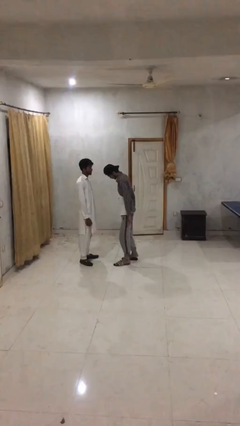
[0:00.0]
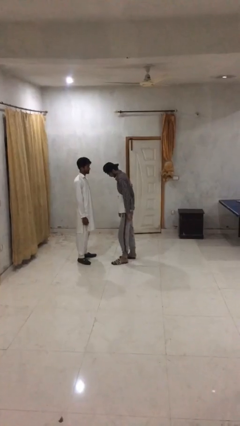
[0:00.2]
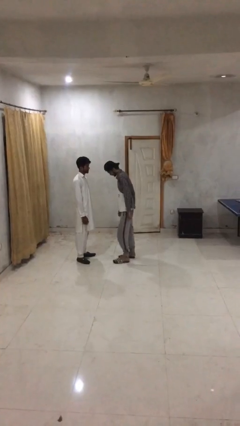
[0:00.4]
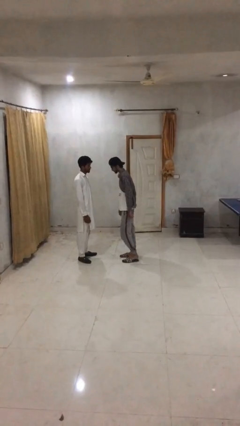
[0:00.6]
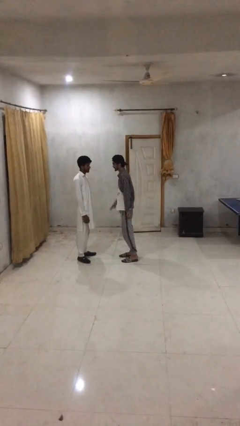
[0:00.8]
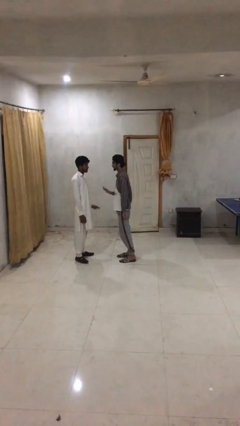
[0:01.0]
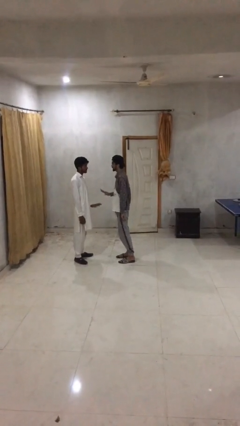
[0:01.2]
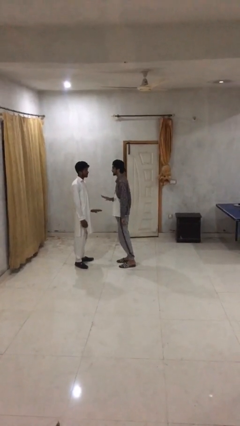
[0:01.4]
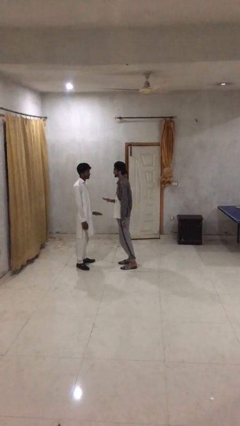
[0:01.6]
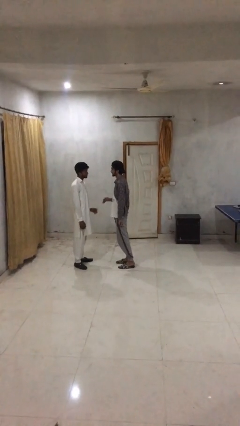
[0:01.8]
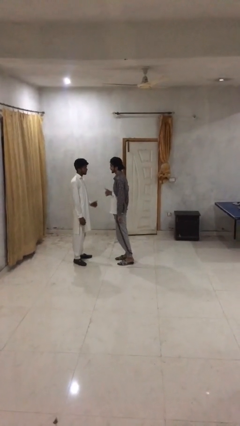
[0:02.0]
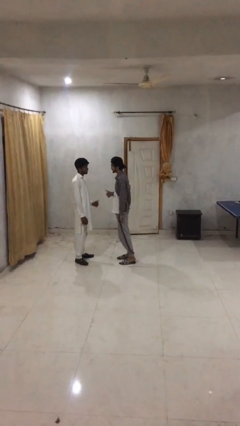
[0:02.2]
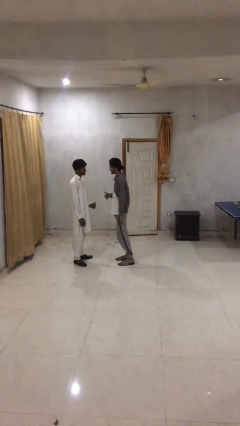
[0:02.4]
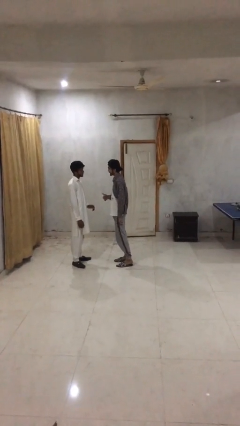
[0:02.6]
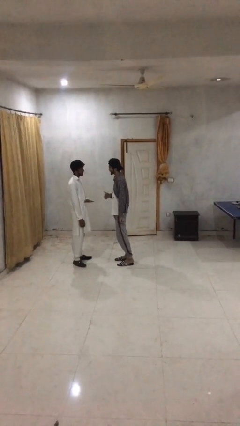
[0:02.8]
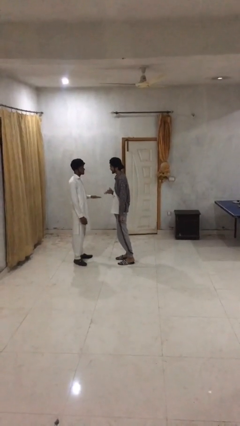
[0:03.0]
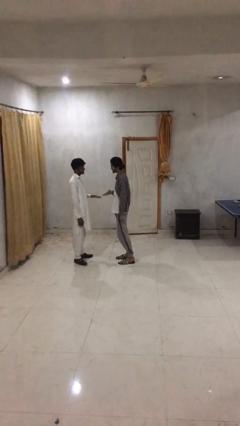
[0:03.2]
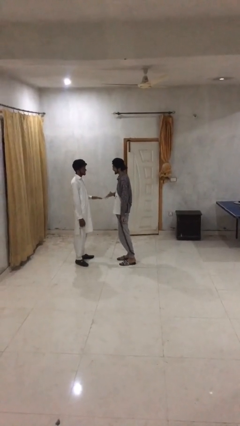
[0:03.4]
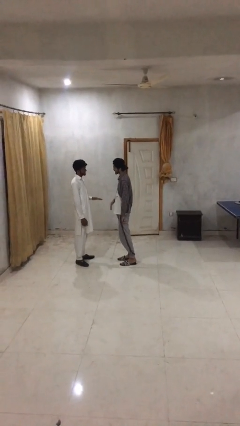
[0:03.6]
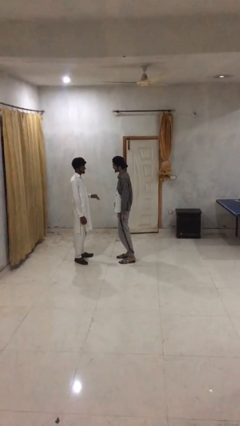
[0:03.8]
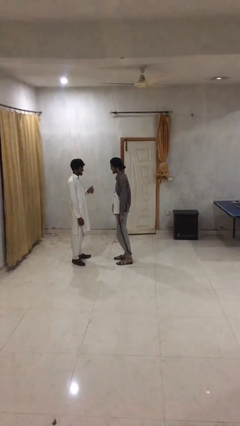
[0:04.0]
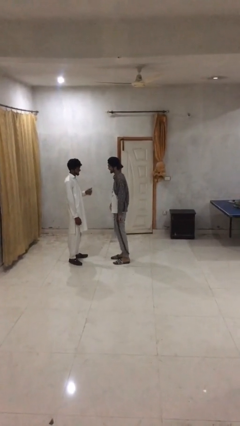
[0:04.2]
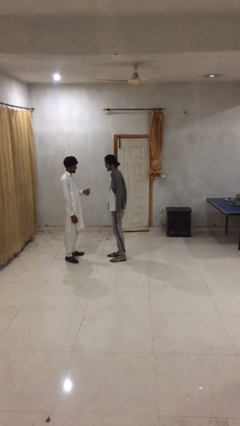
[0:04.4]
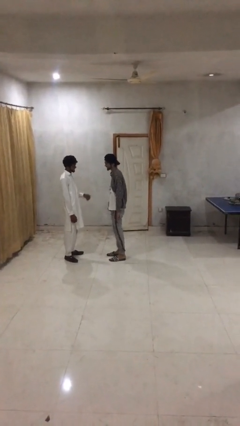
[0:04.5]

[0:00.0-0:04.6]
person talks to person

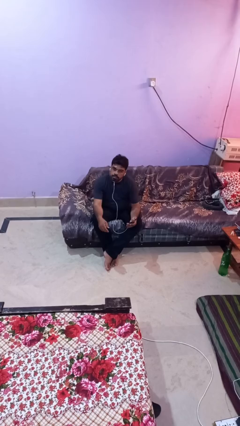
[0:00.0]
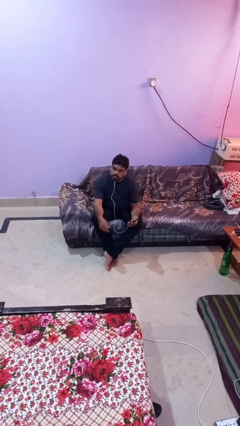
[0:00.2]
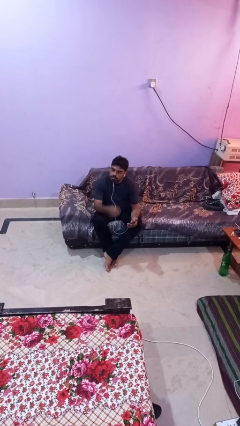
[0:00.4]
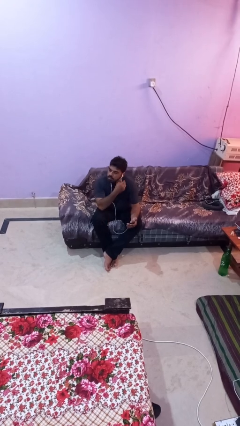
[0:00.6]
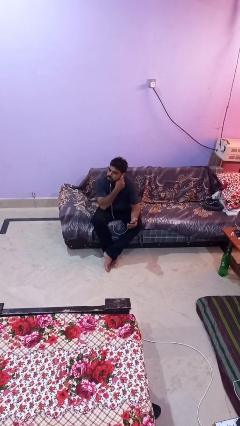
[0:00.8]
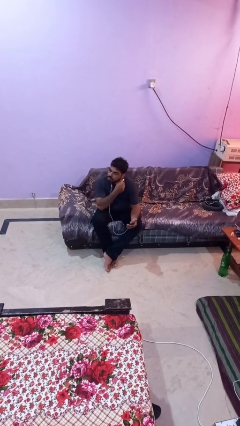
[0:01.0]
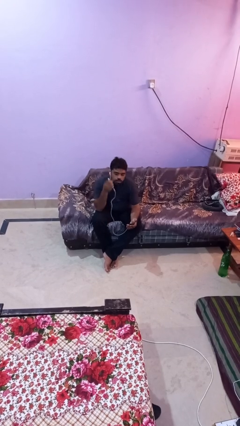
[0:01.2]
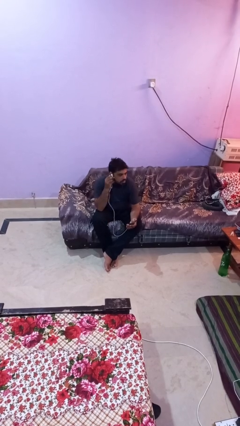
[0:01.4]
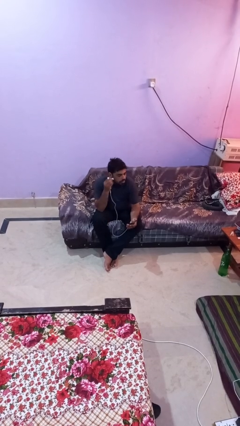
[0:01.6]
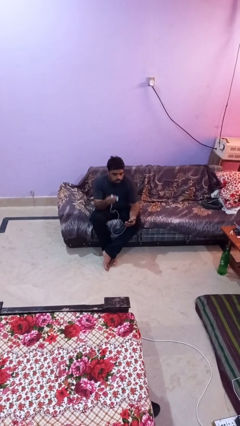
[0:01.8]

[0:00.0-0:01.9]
person takes off headphones

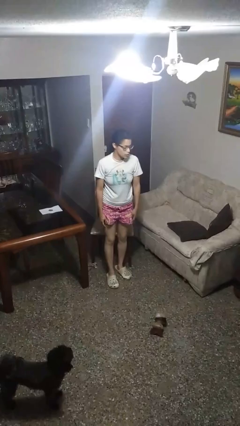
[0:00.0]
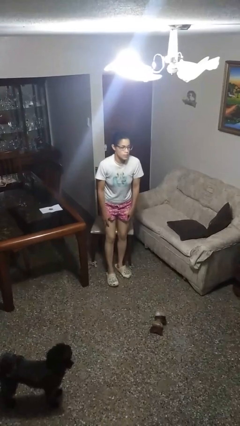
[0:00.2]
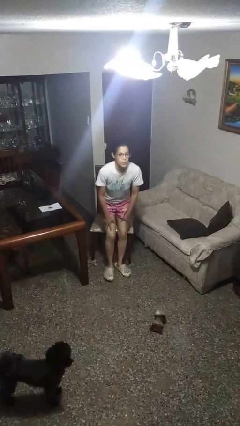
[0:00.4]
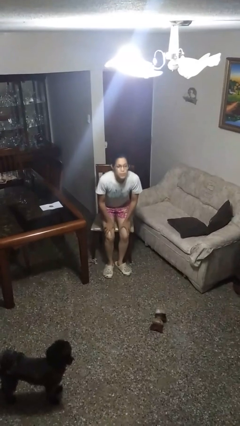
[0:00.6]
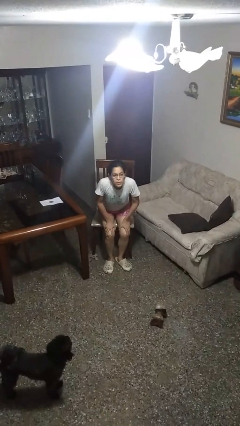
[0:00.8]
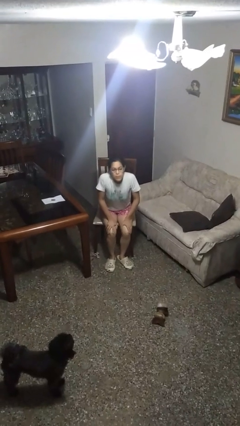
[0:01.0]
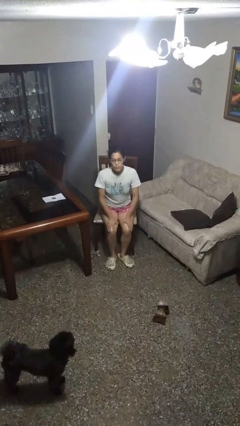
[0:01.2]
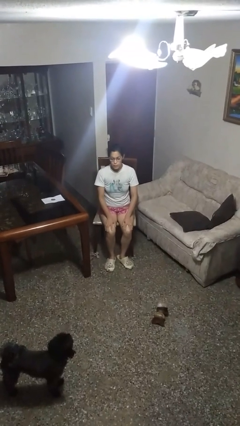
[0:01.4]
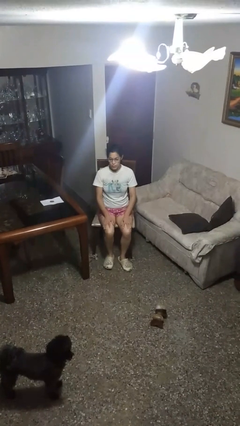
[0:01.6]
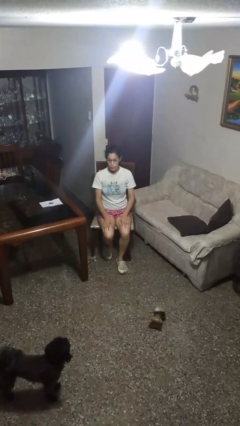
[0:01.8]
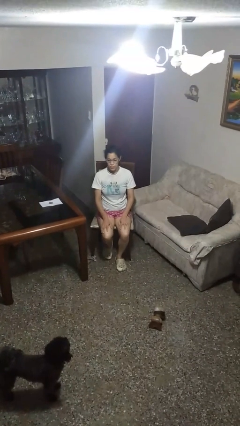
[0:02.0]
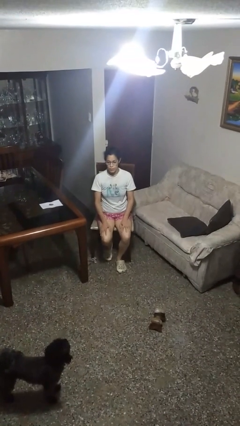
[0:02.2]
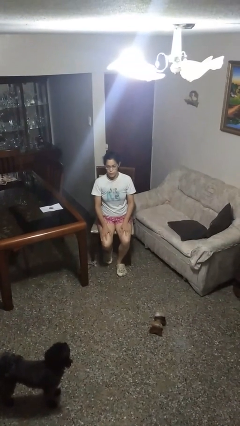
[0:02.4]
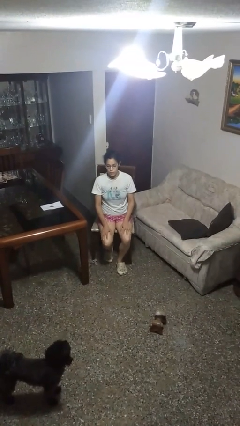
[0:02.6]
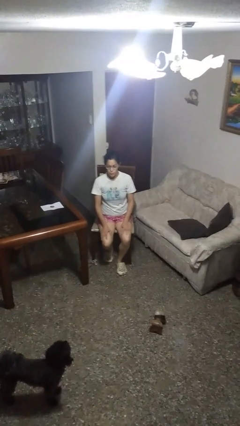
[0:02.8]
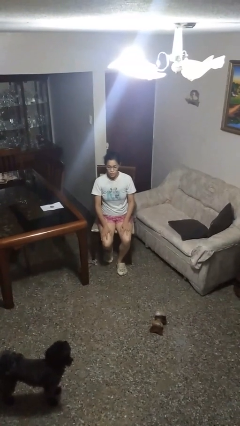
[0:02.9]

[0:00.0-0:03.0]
person sits down

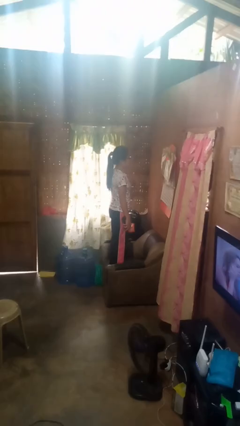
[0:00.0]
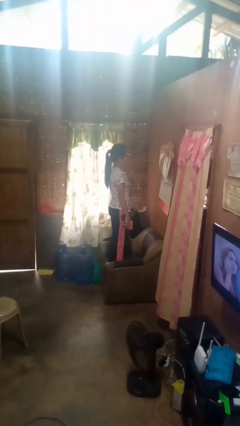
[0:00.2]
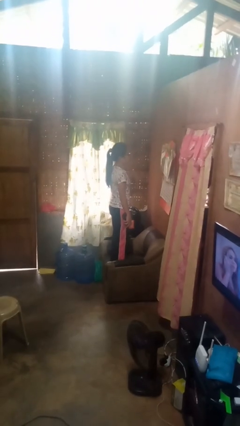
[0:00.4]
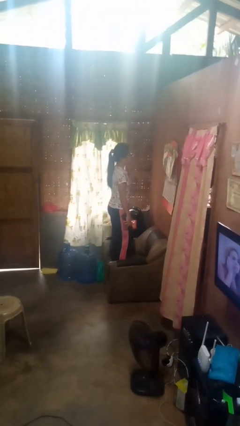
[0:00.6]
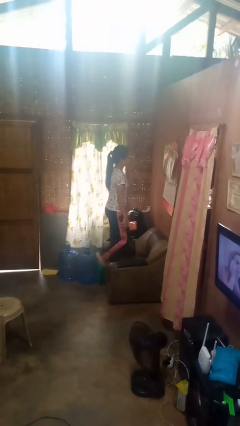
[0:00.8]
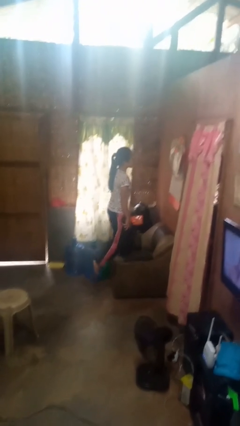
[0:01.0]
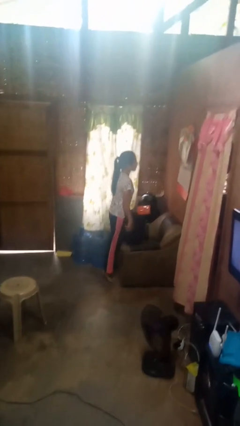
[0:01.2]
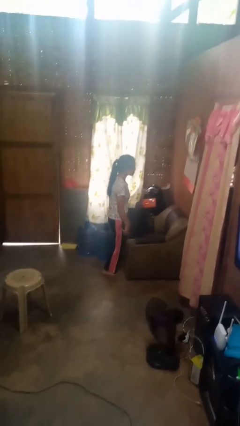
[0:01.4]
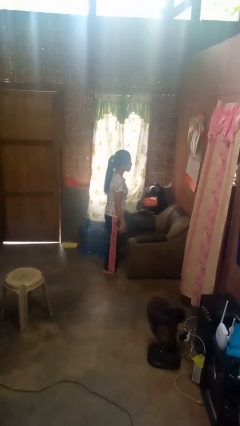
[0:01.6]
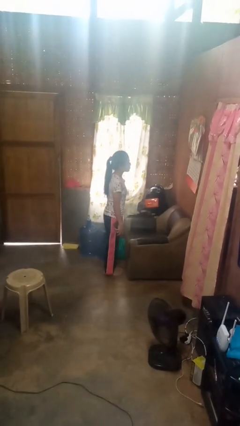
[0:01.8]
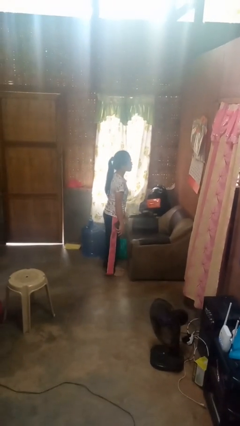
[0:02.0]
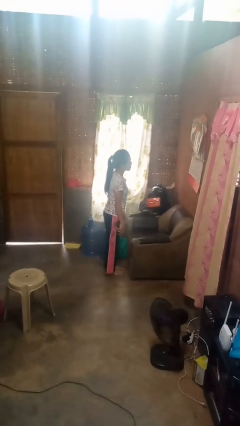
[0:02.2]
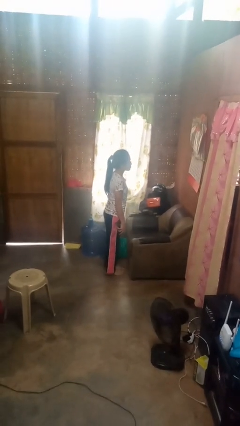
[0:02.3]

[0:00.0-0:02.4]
person climbs off couch

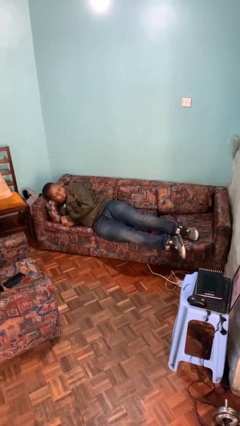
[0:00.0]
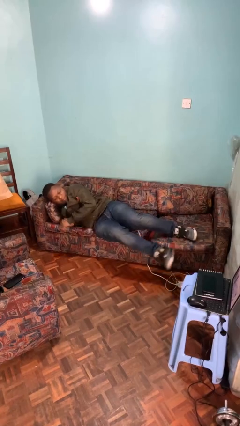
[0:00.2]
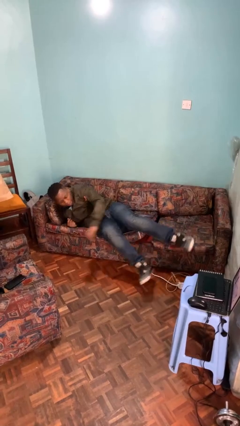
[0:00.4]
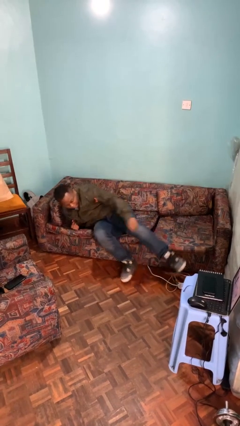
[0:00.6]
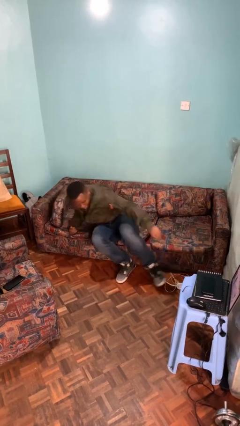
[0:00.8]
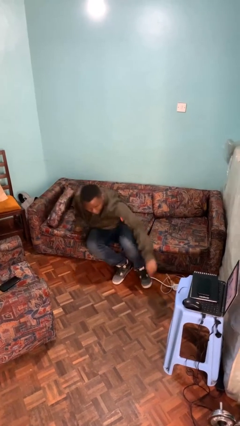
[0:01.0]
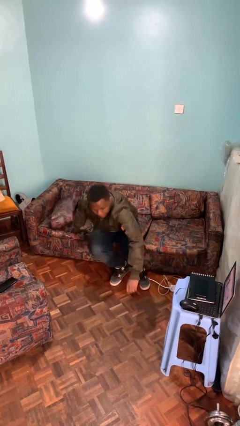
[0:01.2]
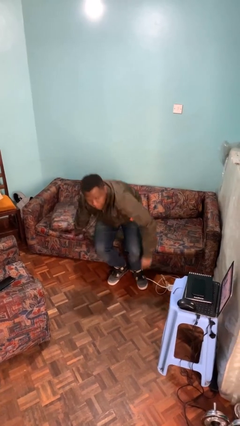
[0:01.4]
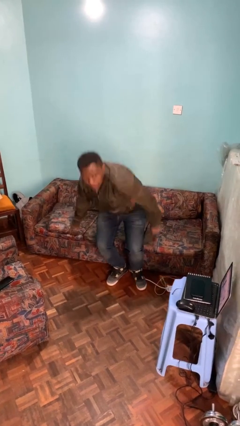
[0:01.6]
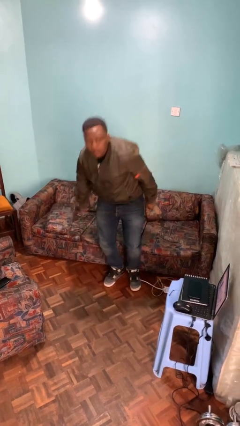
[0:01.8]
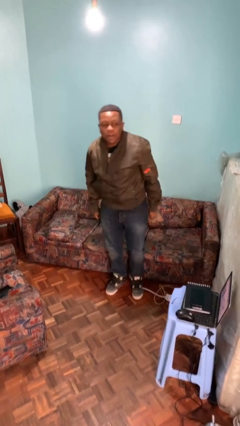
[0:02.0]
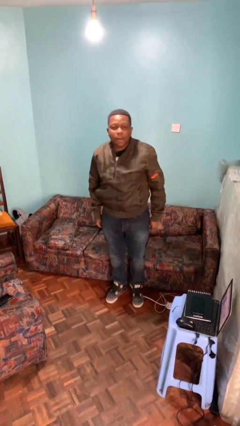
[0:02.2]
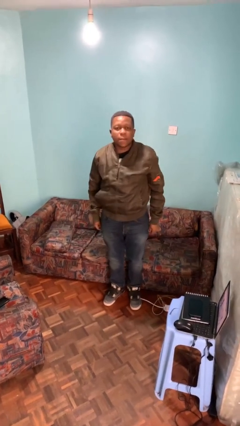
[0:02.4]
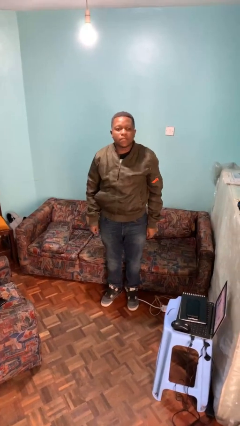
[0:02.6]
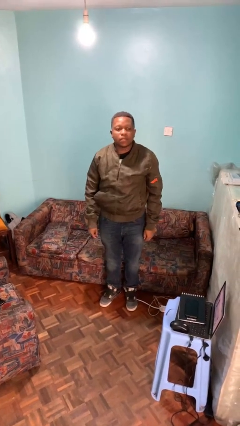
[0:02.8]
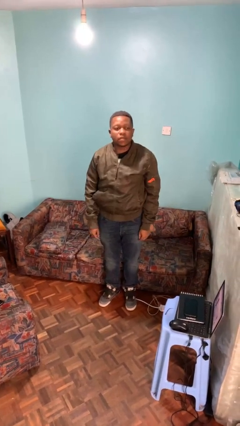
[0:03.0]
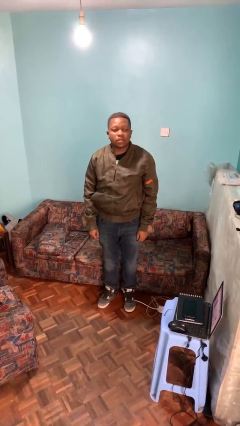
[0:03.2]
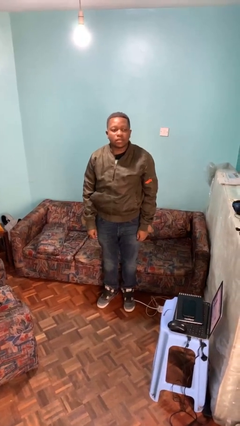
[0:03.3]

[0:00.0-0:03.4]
person stands up

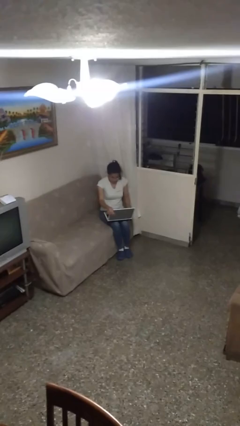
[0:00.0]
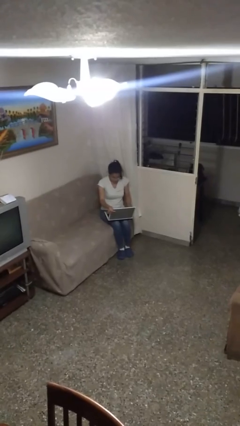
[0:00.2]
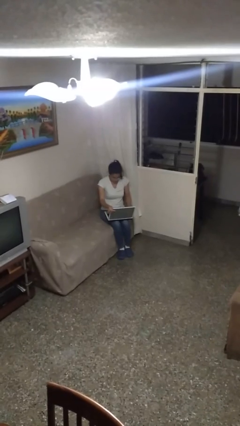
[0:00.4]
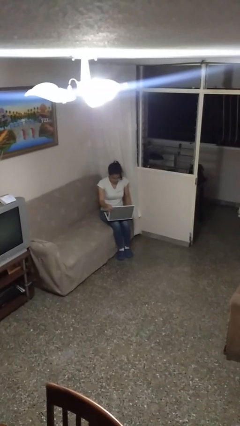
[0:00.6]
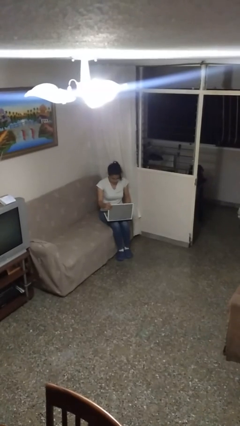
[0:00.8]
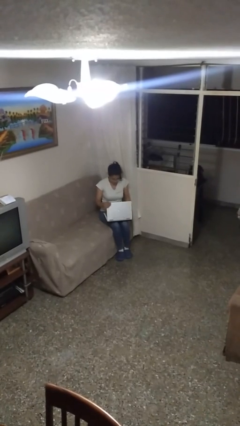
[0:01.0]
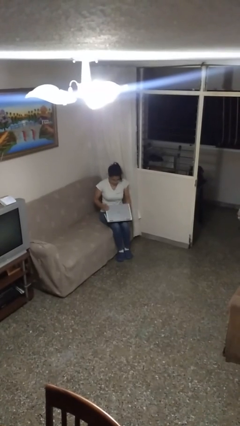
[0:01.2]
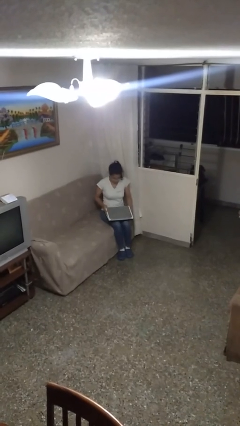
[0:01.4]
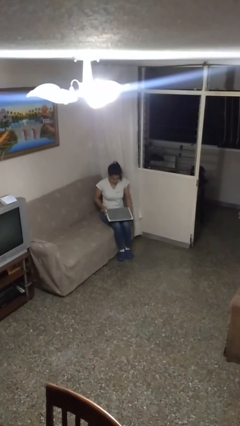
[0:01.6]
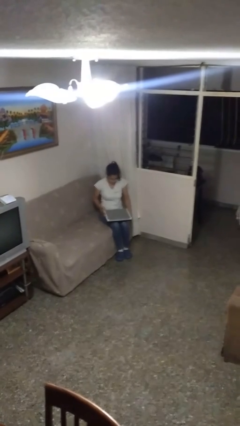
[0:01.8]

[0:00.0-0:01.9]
person closes laptop

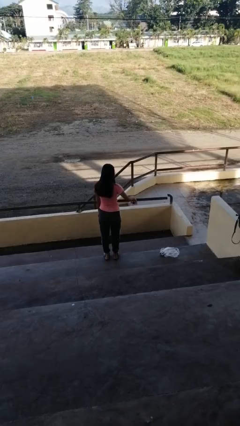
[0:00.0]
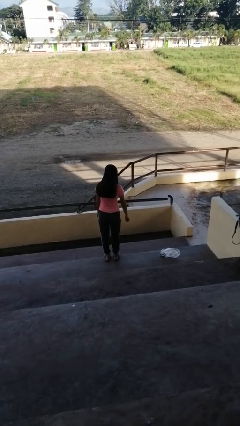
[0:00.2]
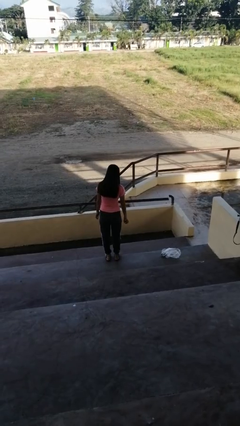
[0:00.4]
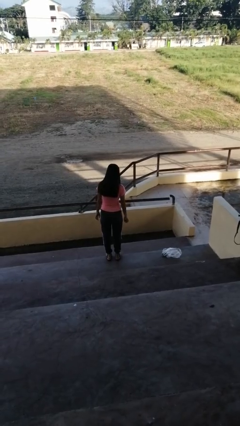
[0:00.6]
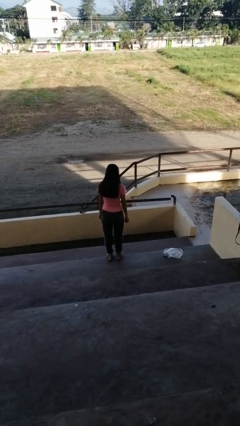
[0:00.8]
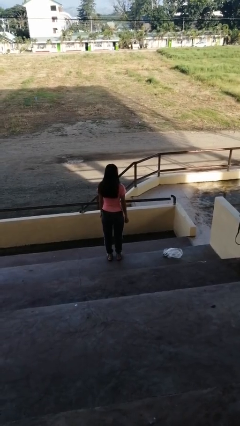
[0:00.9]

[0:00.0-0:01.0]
person catches dropped object
